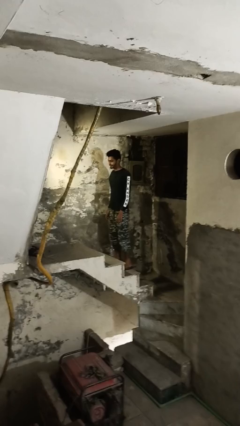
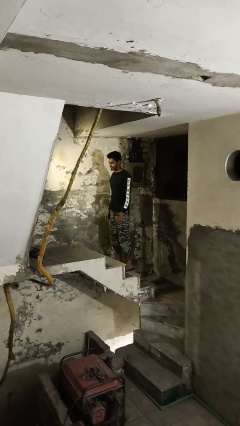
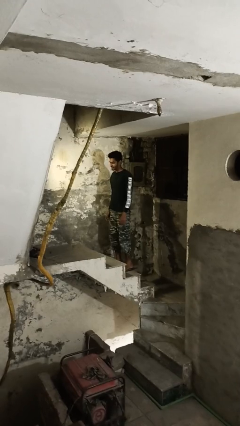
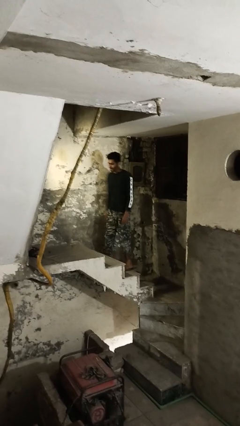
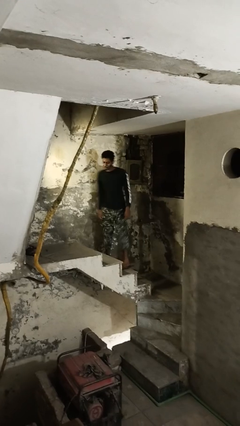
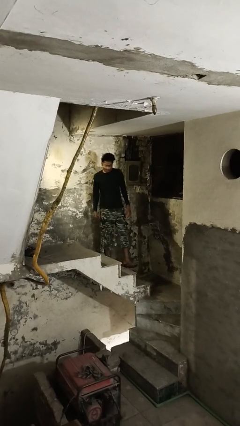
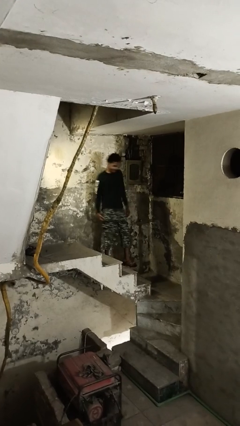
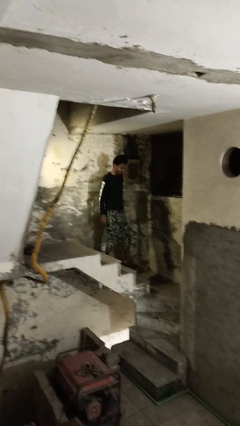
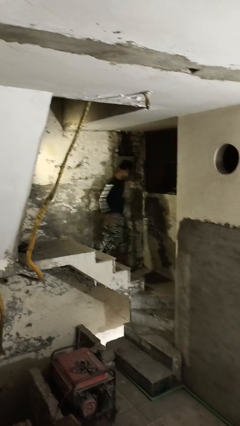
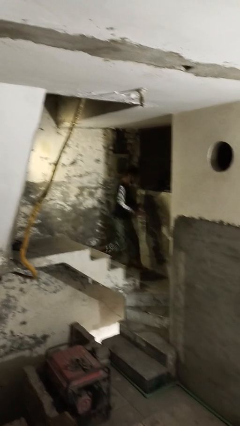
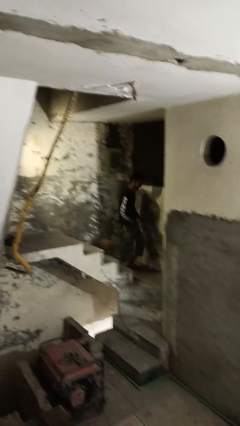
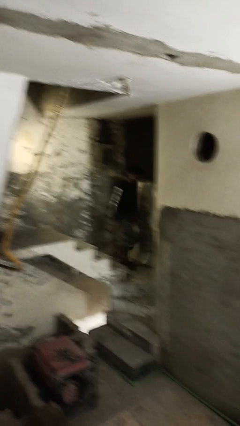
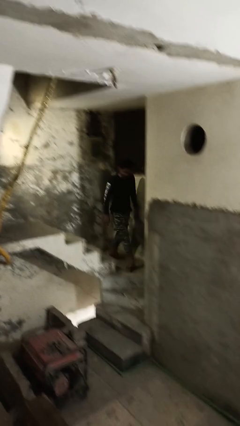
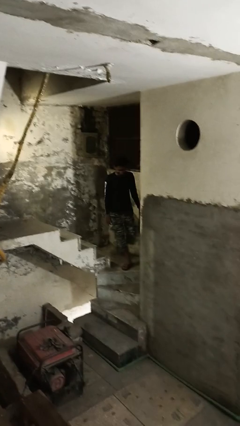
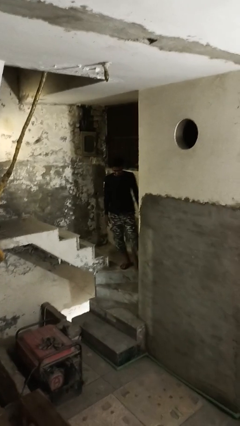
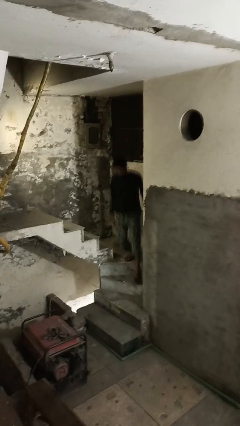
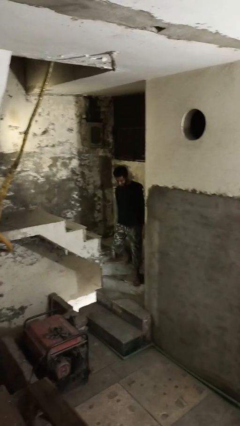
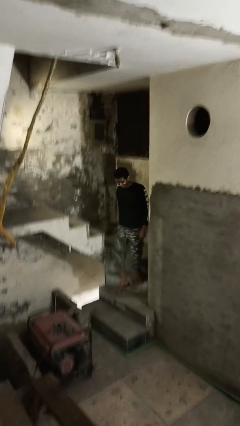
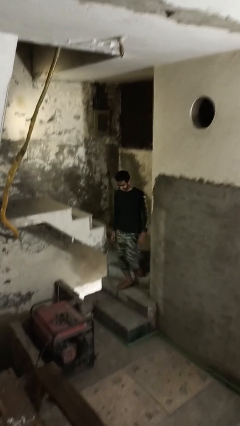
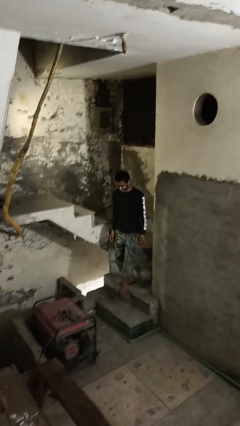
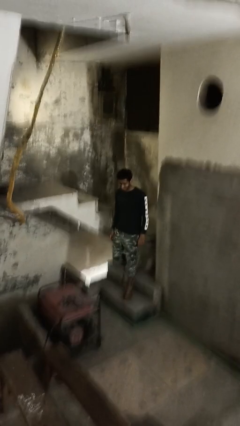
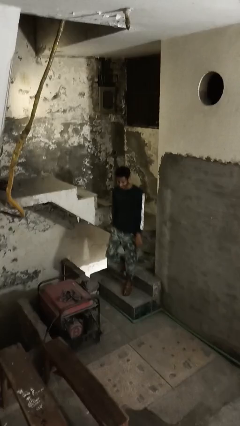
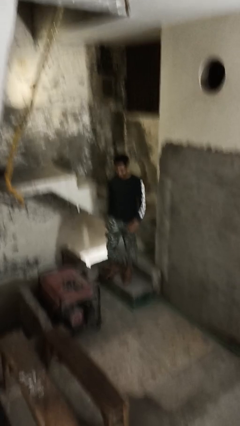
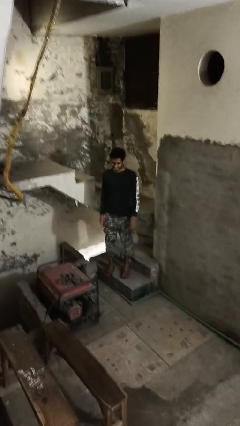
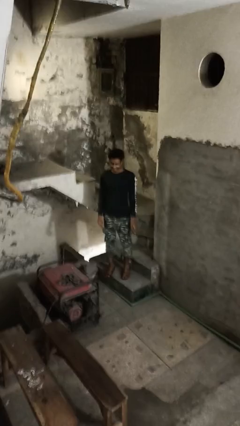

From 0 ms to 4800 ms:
person climbs down stairs

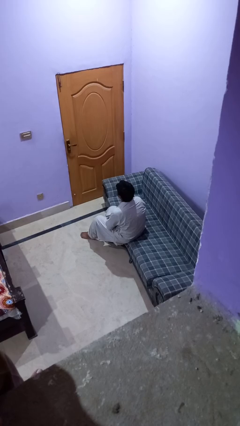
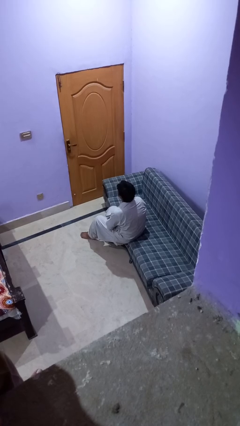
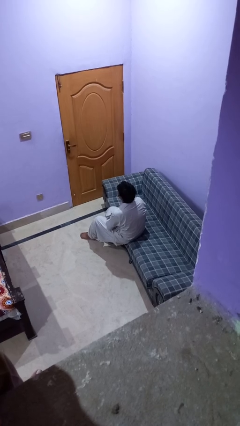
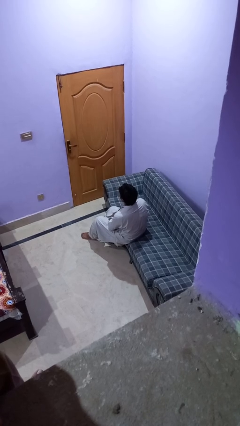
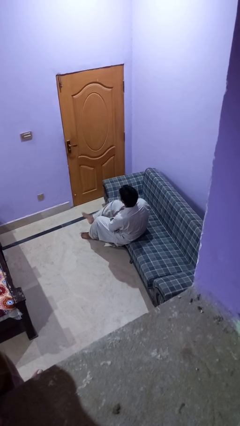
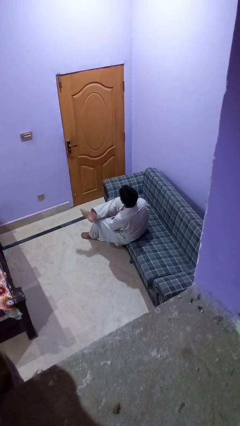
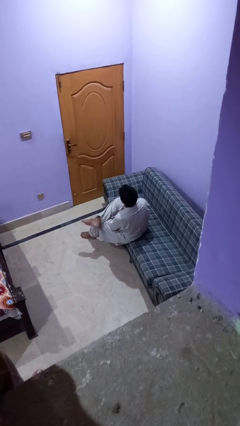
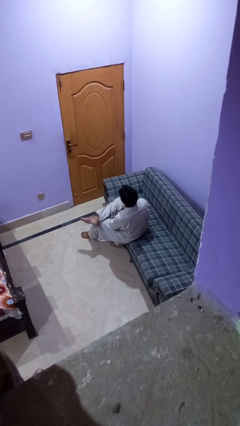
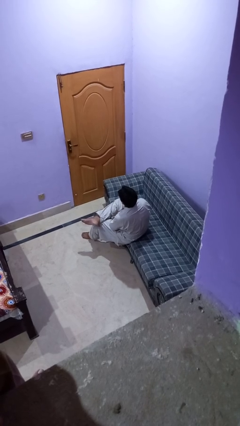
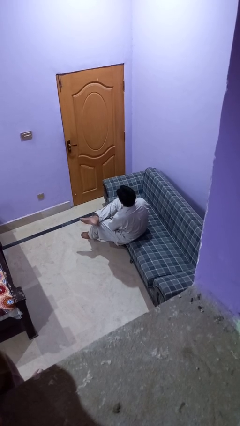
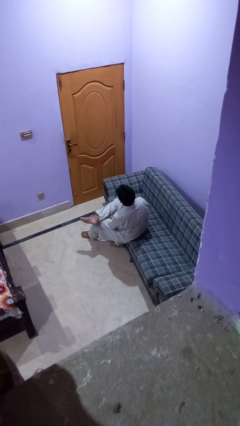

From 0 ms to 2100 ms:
person crosses legs

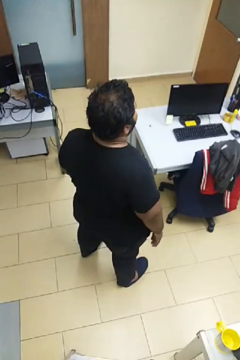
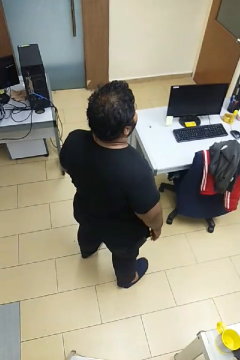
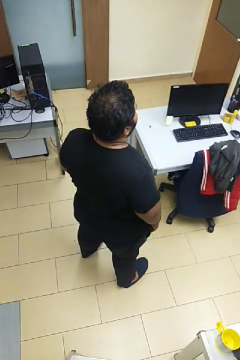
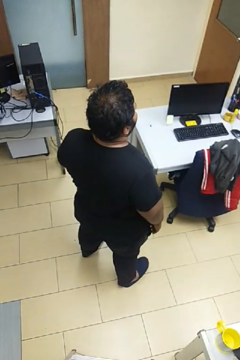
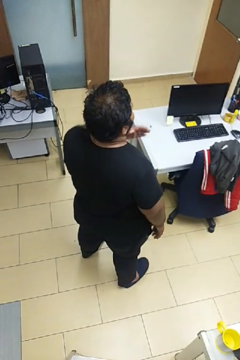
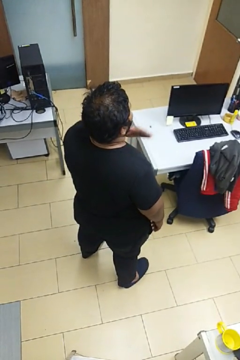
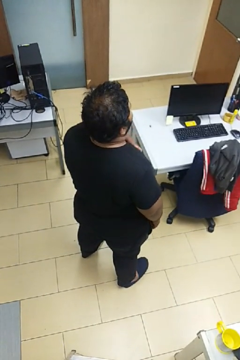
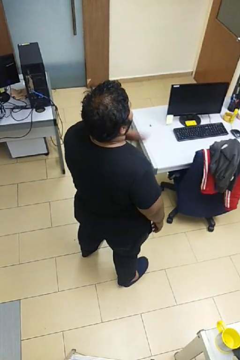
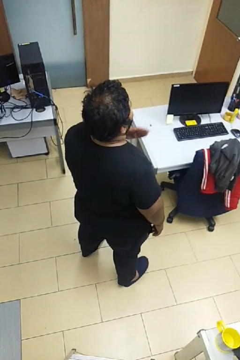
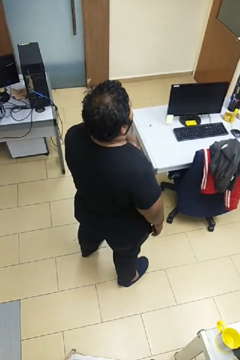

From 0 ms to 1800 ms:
person drums on chest

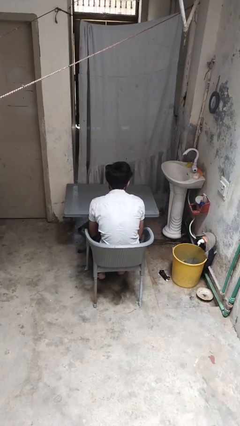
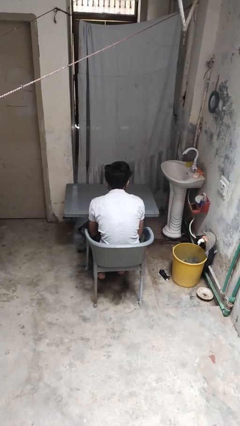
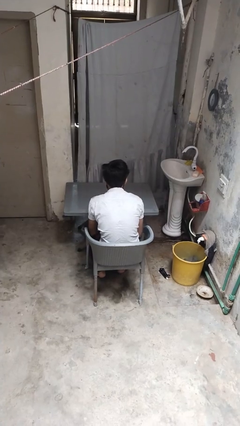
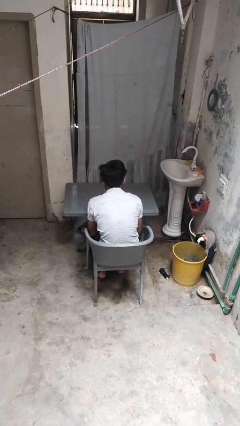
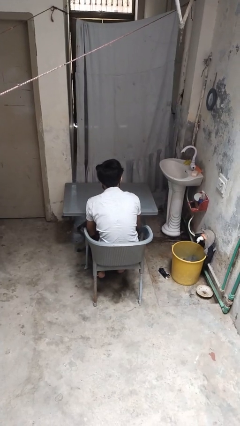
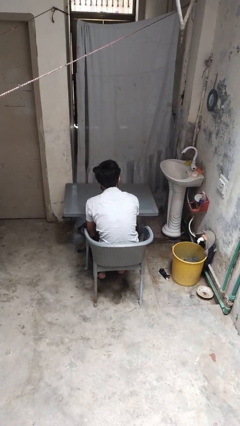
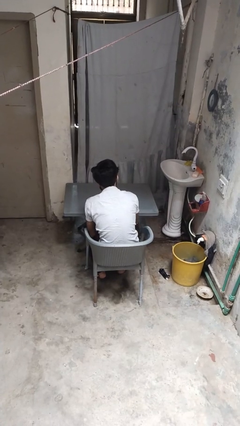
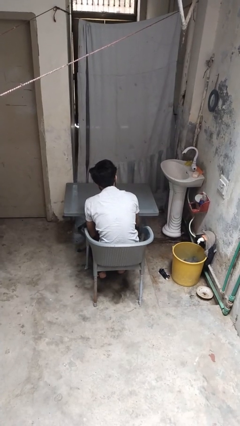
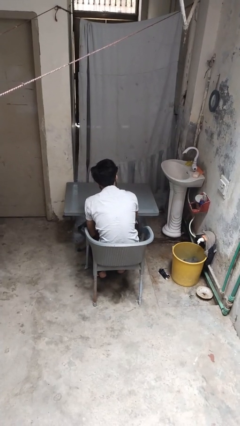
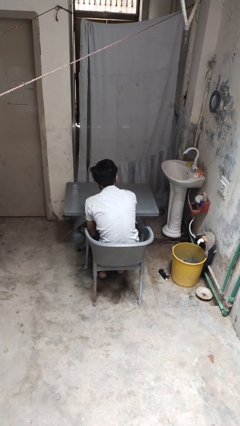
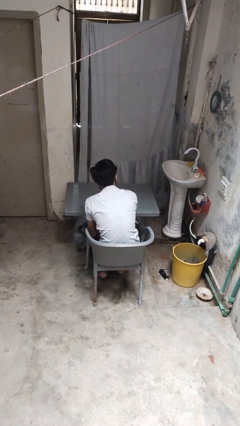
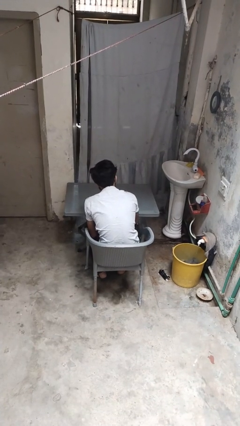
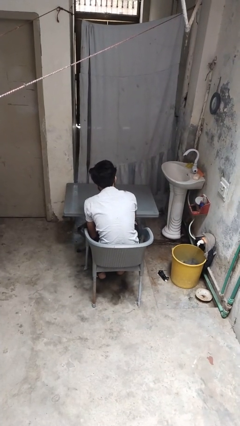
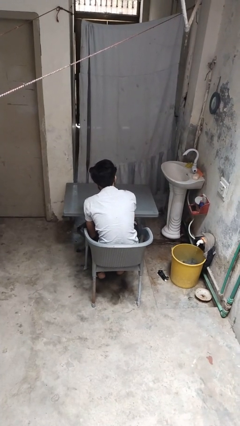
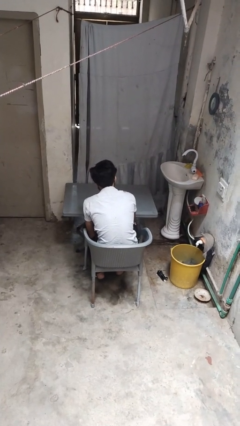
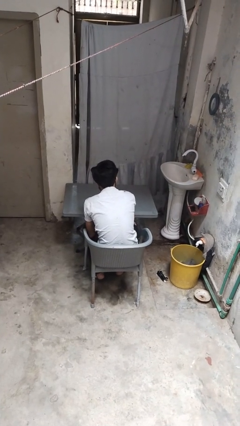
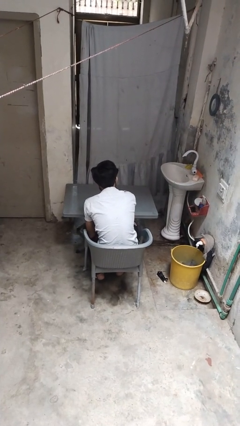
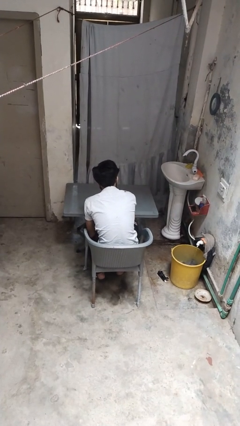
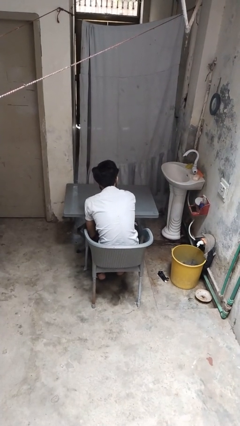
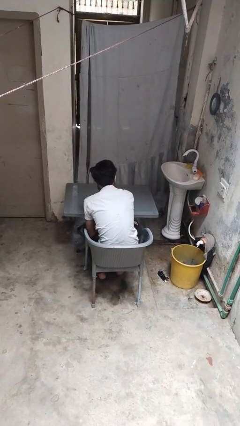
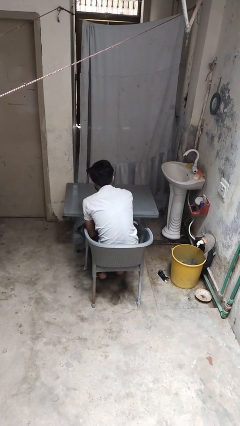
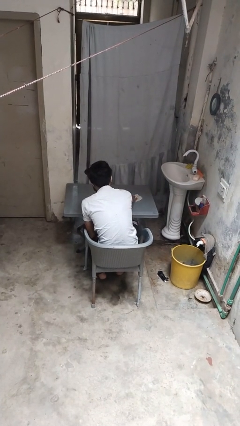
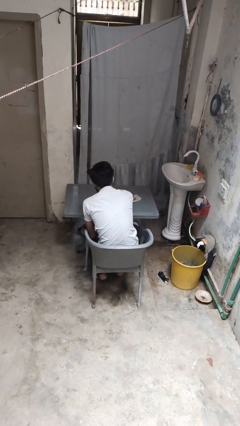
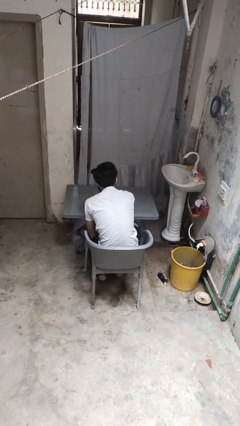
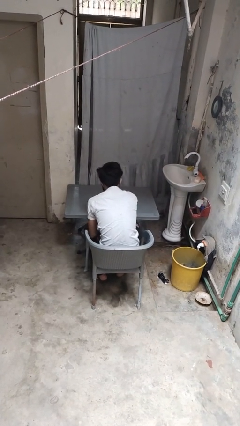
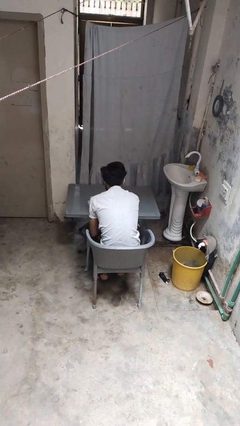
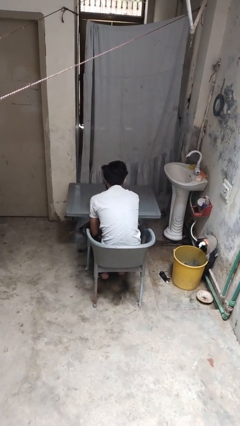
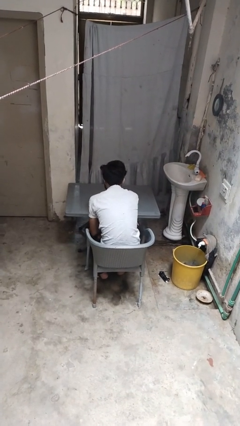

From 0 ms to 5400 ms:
person cleans table with rag

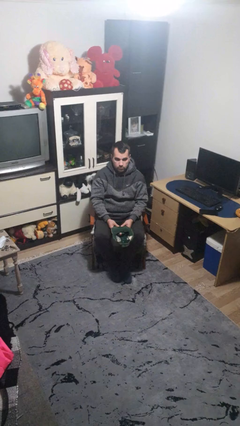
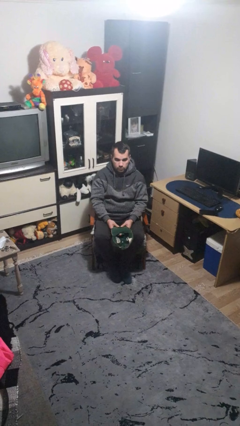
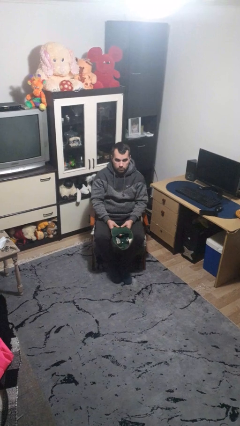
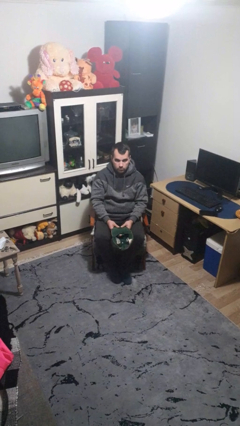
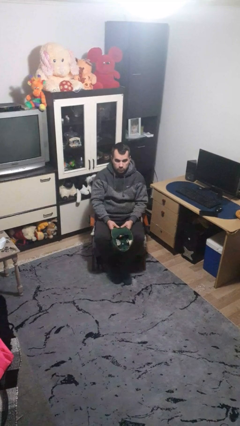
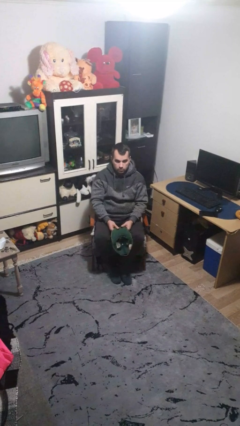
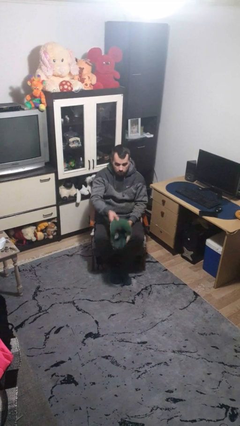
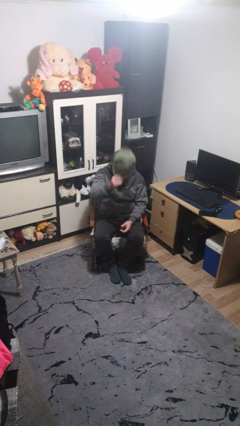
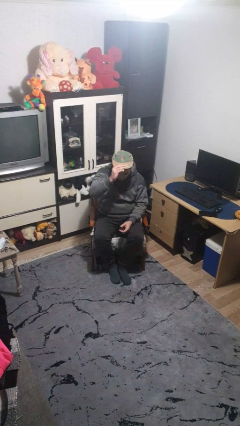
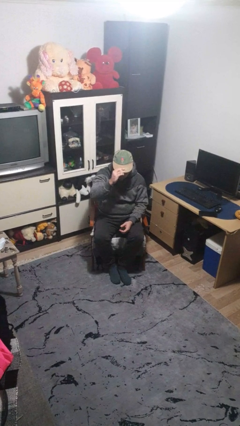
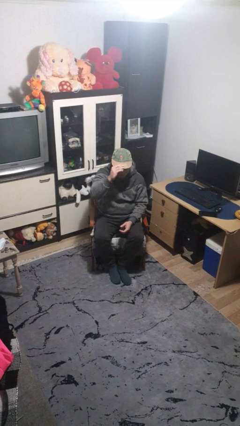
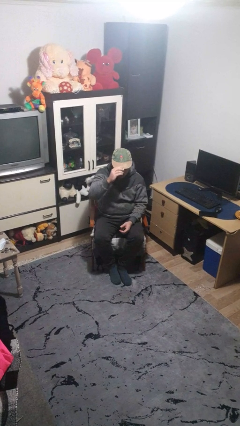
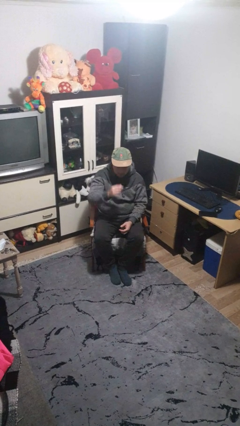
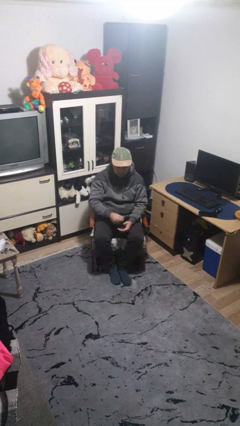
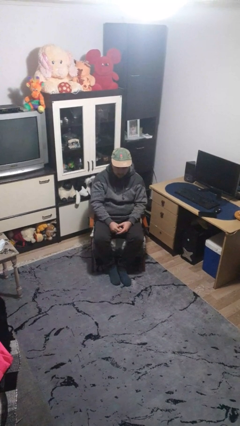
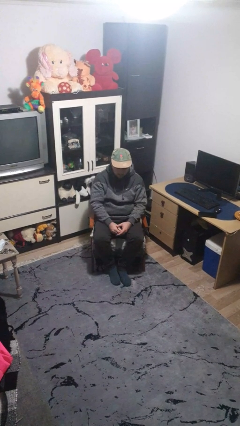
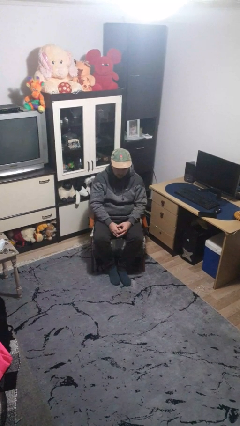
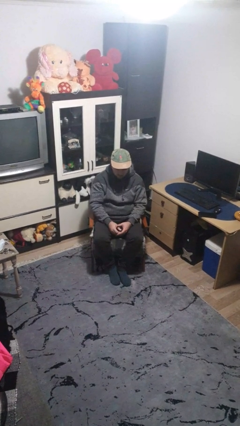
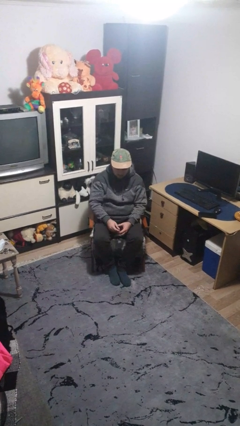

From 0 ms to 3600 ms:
person puts on hat
